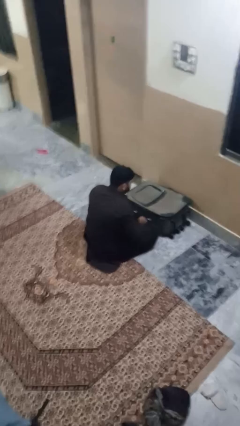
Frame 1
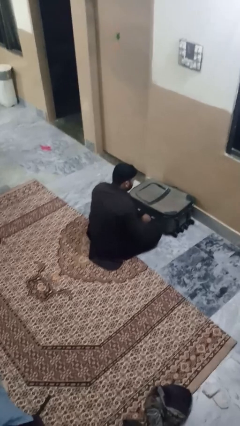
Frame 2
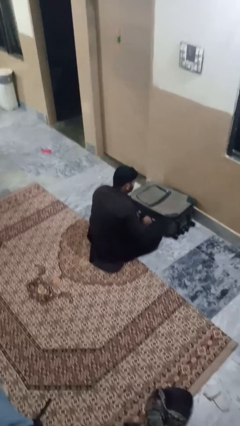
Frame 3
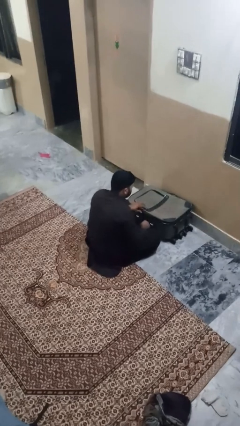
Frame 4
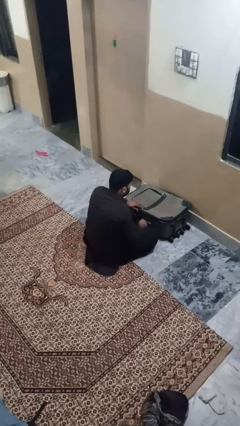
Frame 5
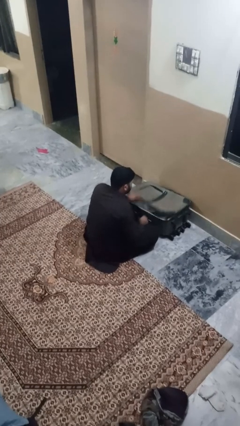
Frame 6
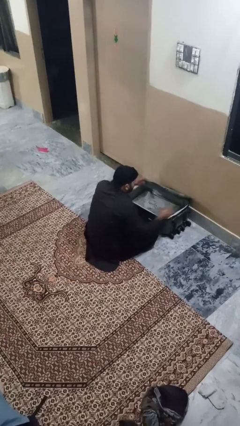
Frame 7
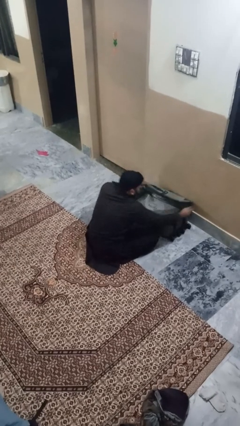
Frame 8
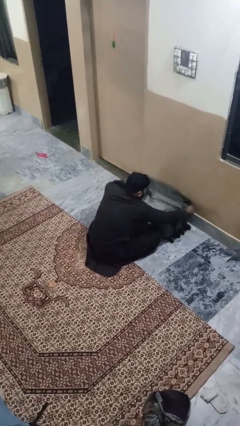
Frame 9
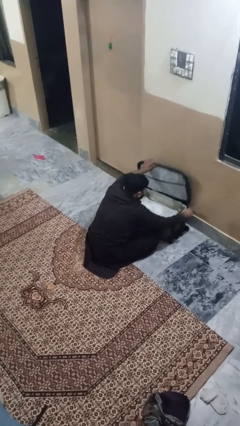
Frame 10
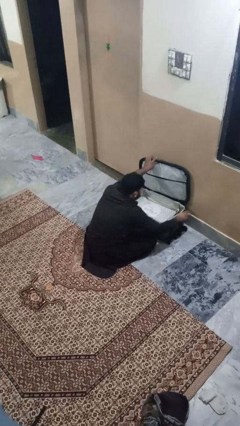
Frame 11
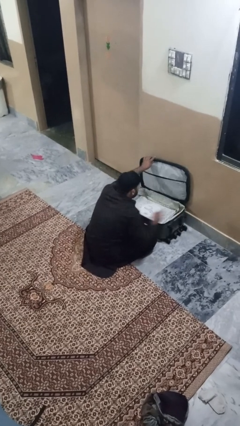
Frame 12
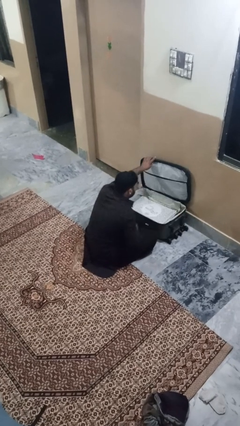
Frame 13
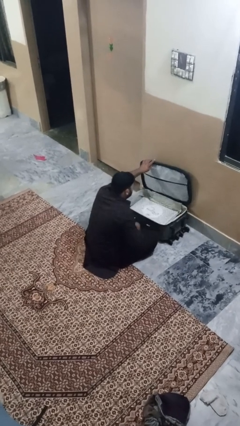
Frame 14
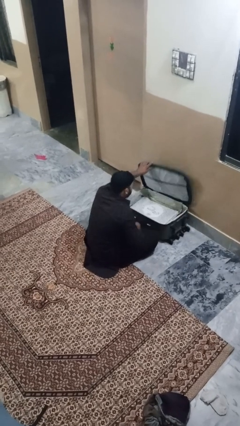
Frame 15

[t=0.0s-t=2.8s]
person opens suitcase

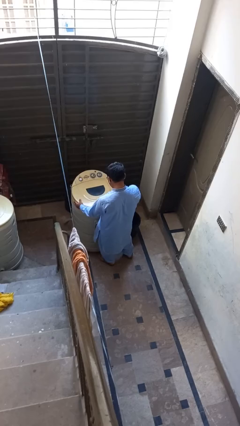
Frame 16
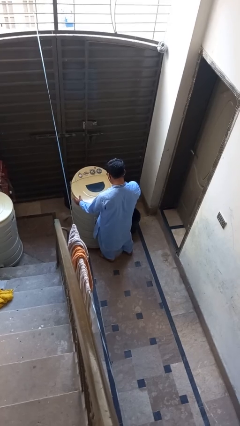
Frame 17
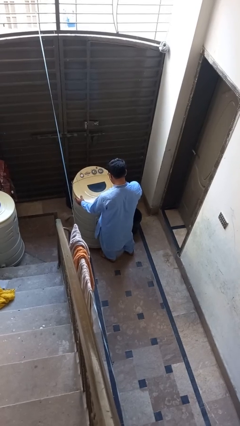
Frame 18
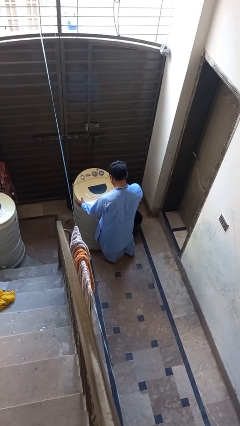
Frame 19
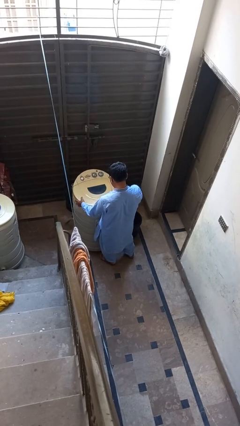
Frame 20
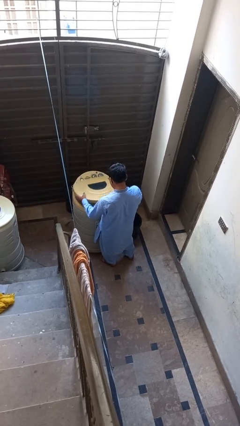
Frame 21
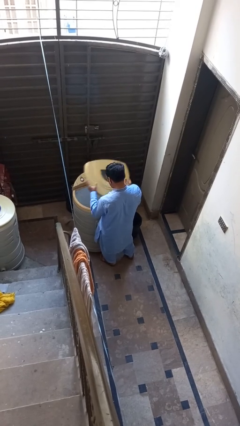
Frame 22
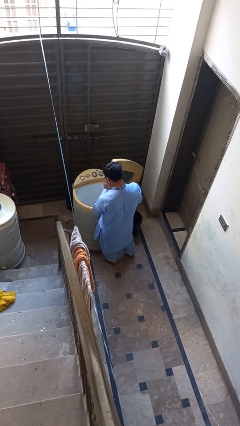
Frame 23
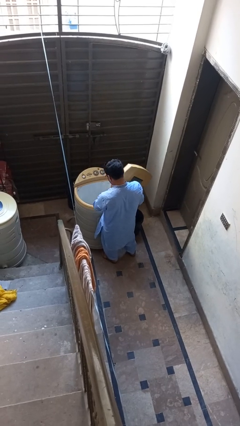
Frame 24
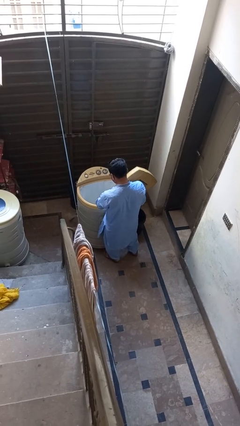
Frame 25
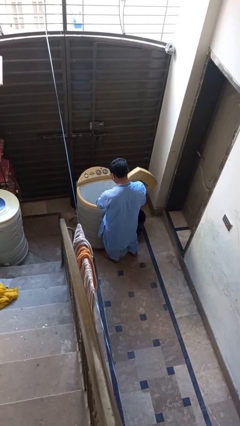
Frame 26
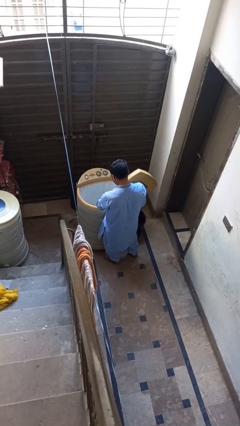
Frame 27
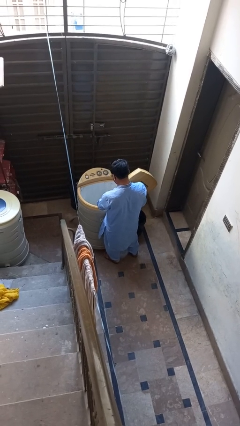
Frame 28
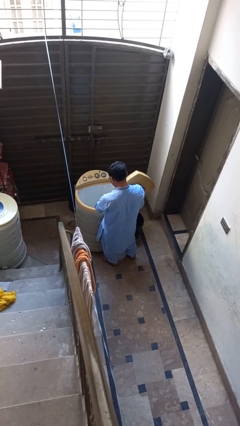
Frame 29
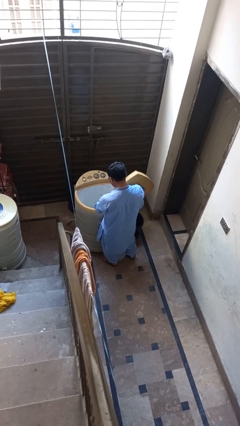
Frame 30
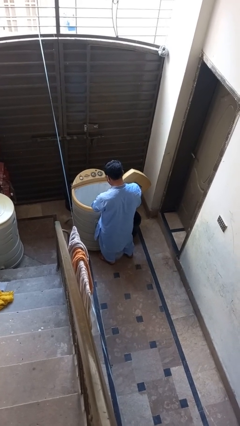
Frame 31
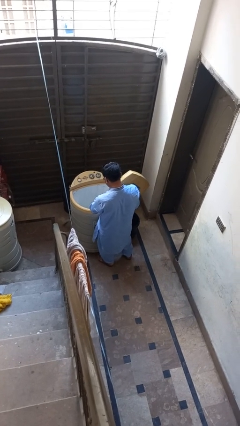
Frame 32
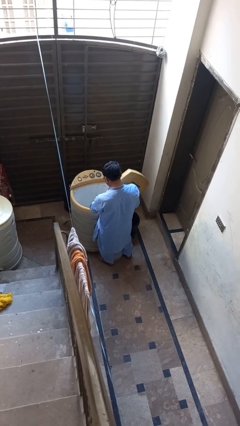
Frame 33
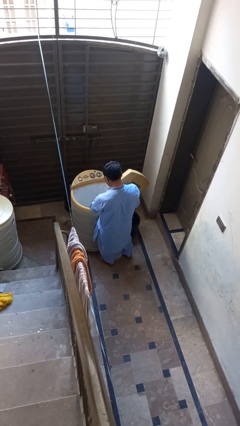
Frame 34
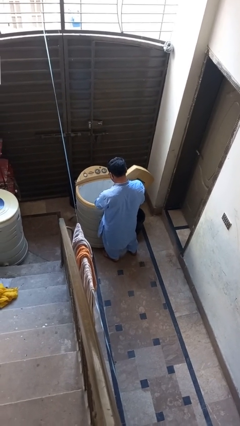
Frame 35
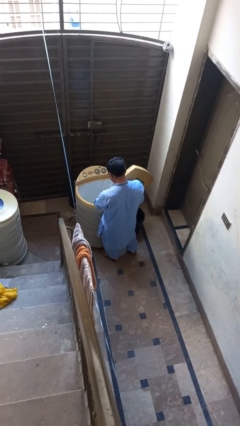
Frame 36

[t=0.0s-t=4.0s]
person opens clothes washer

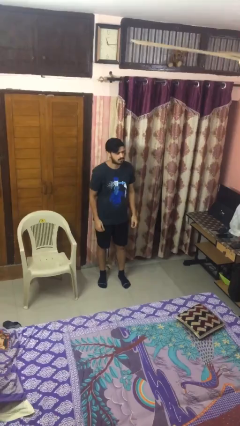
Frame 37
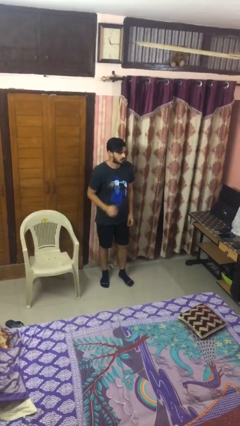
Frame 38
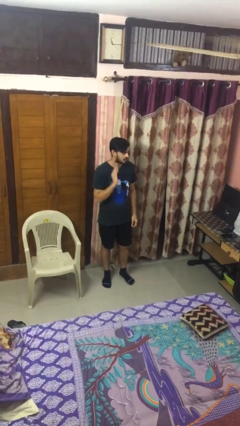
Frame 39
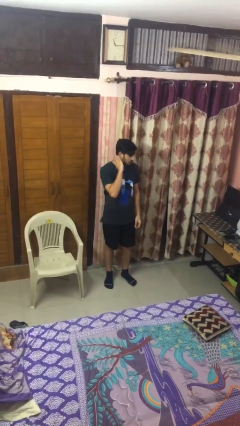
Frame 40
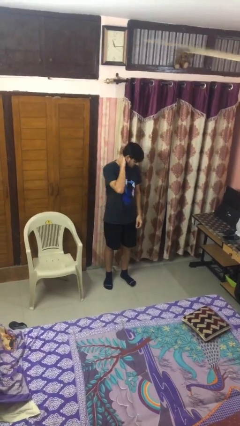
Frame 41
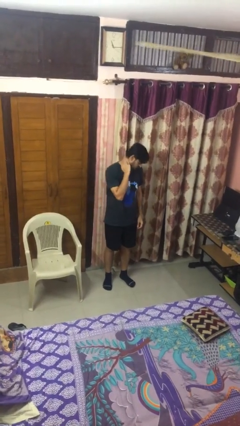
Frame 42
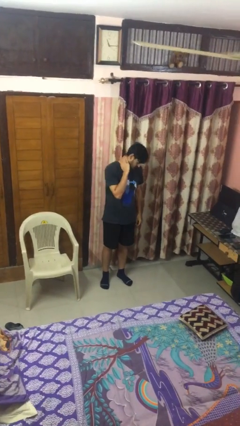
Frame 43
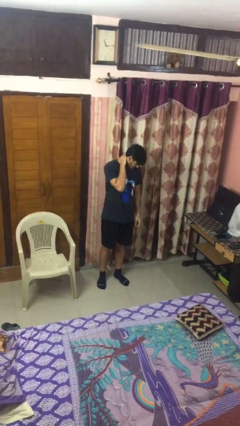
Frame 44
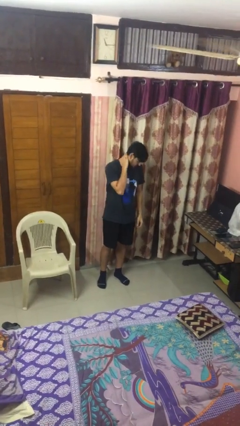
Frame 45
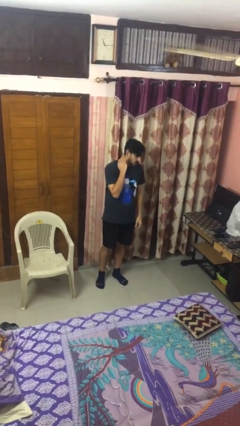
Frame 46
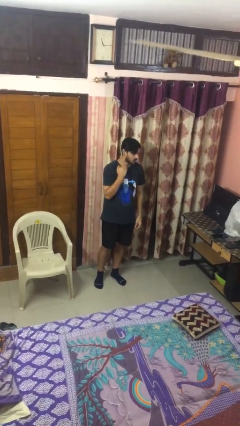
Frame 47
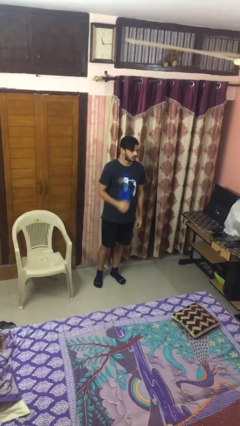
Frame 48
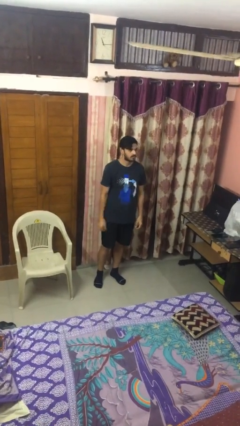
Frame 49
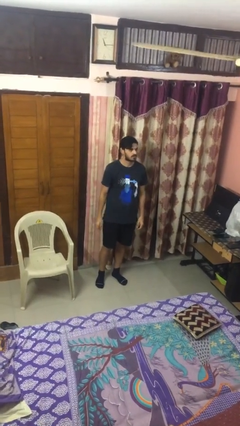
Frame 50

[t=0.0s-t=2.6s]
person rubs neck

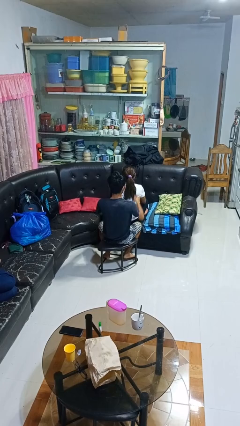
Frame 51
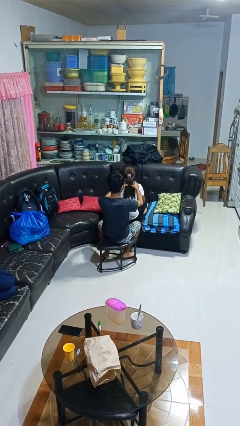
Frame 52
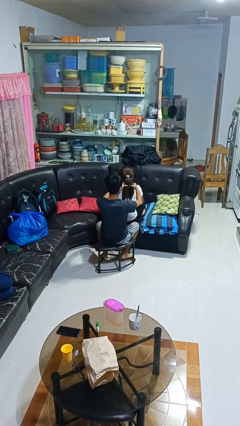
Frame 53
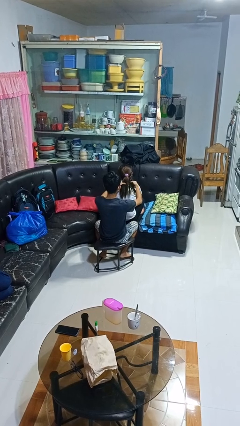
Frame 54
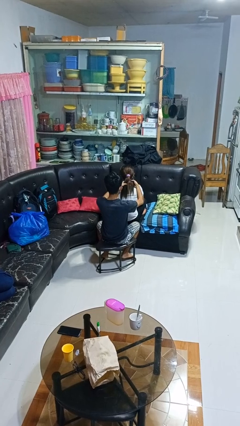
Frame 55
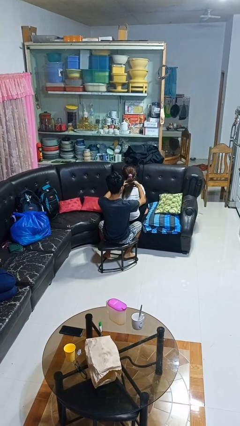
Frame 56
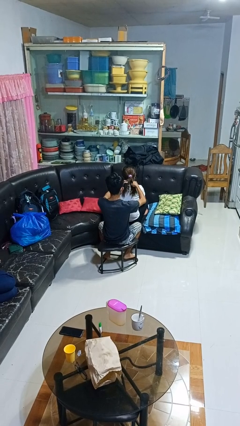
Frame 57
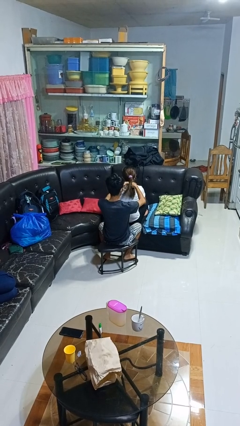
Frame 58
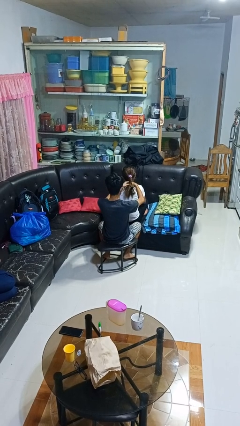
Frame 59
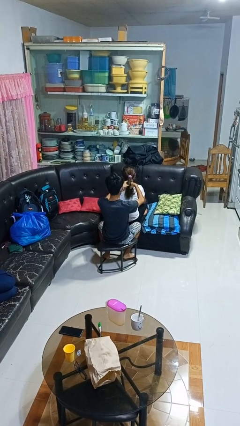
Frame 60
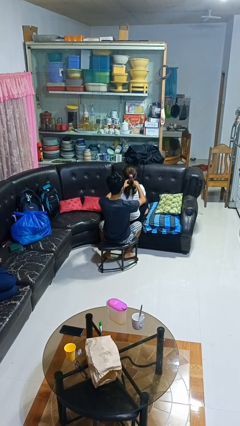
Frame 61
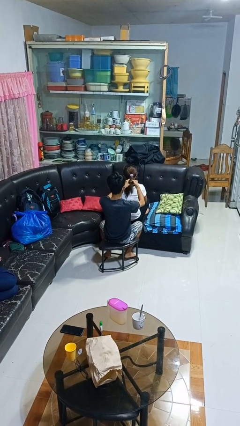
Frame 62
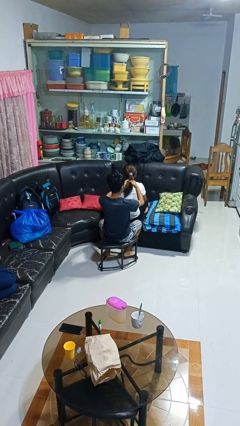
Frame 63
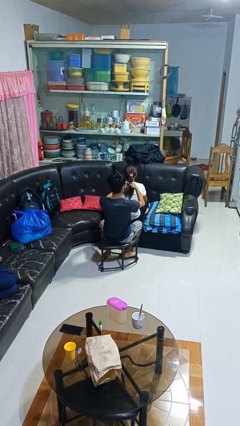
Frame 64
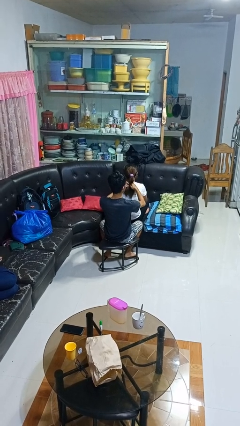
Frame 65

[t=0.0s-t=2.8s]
person braids hair of person

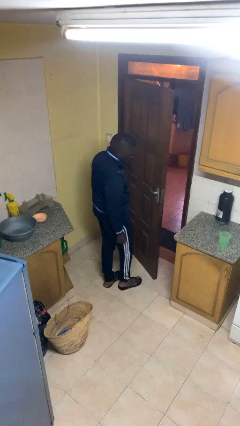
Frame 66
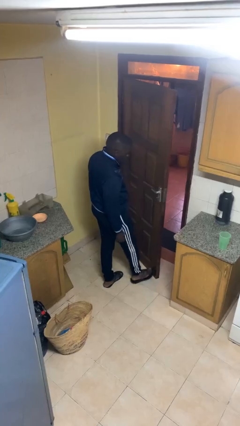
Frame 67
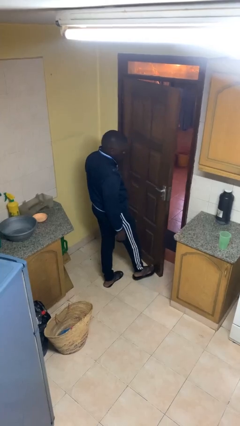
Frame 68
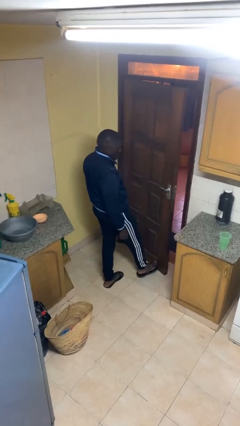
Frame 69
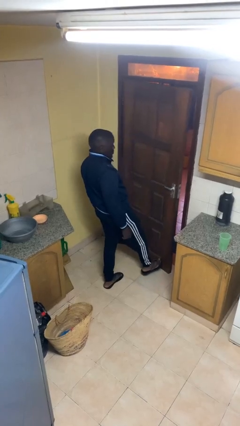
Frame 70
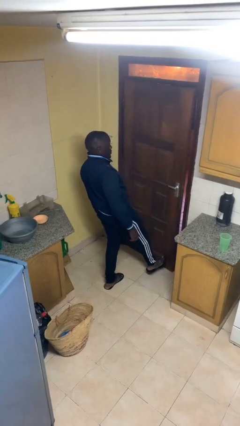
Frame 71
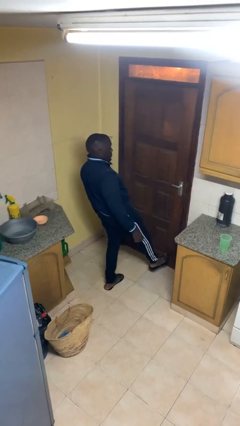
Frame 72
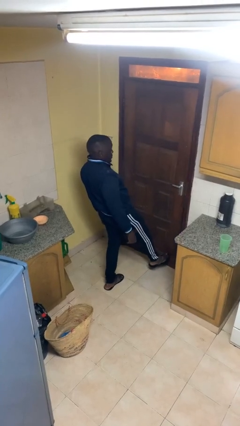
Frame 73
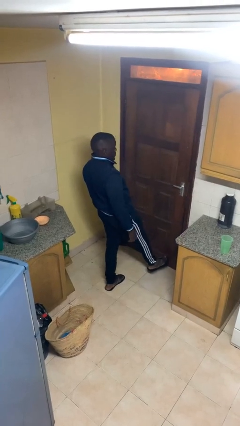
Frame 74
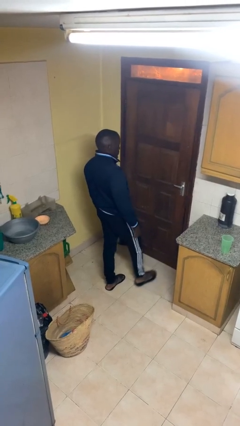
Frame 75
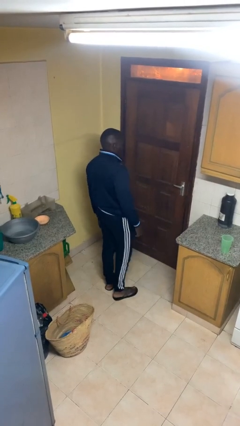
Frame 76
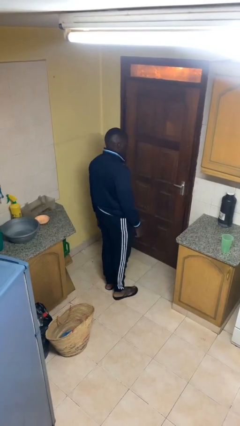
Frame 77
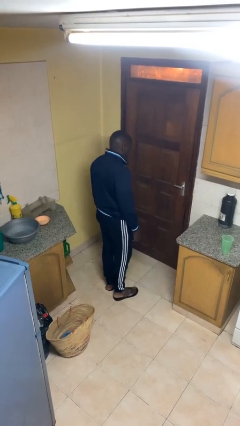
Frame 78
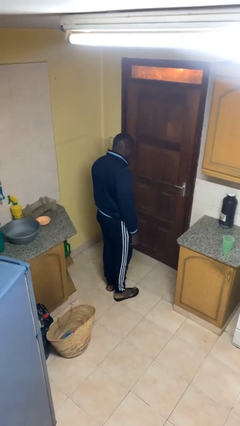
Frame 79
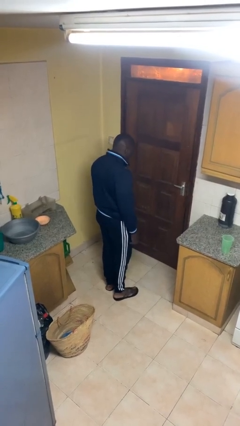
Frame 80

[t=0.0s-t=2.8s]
person closes door with foot

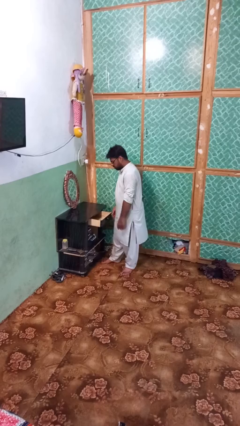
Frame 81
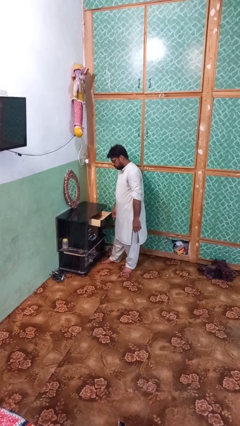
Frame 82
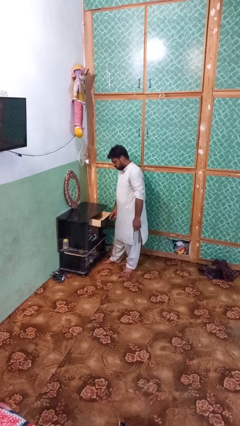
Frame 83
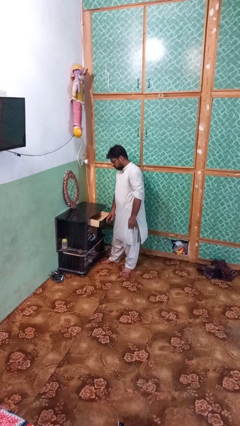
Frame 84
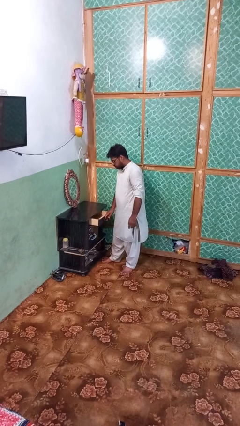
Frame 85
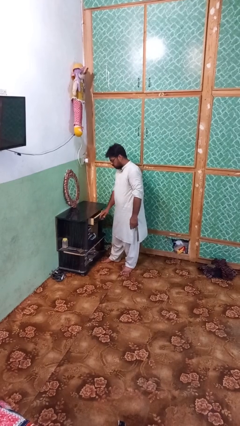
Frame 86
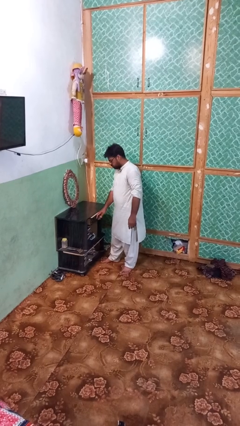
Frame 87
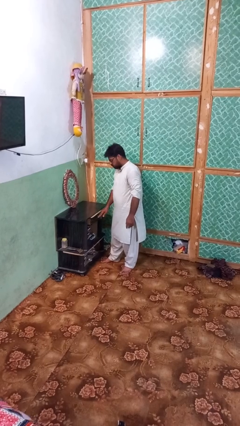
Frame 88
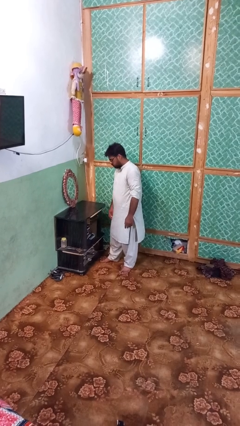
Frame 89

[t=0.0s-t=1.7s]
person closes dresser drawer

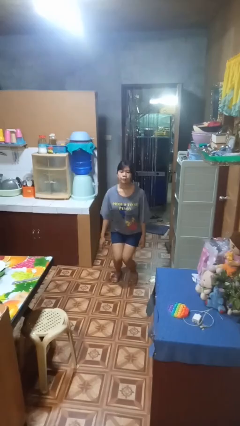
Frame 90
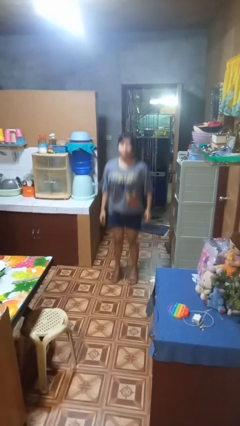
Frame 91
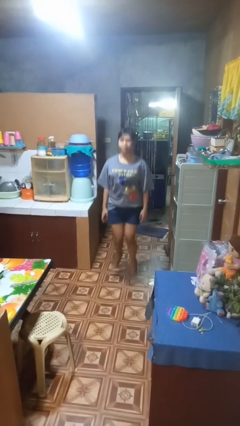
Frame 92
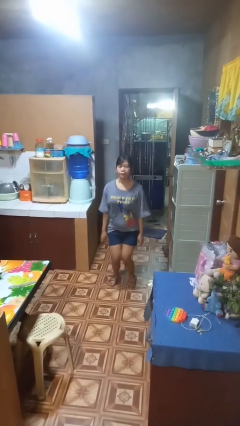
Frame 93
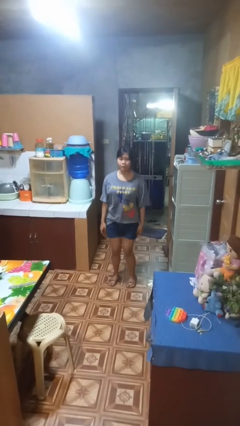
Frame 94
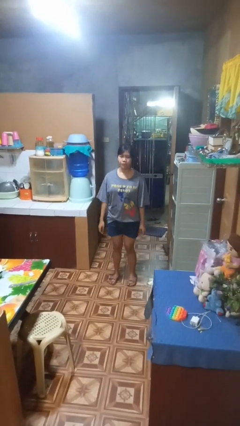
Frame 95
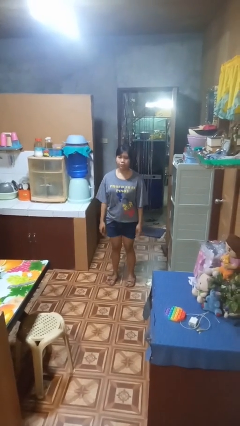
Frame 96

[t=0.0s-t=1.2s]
person jumps
